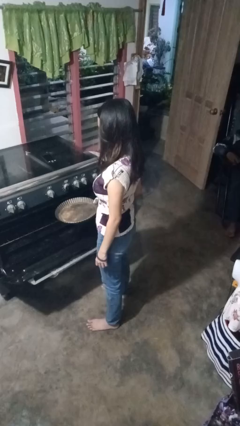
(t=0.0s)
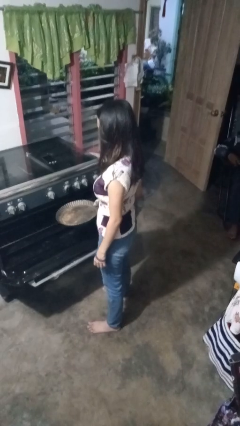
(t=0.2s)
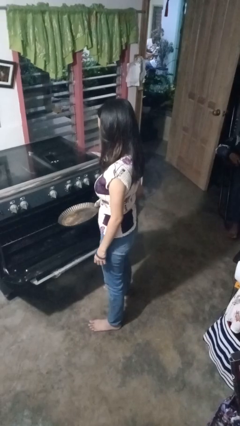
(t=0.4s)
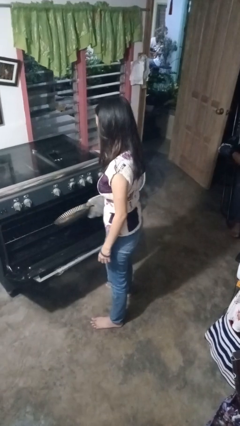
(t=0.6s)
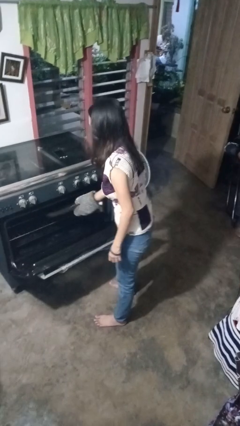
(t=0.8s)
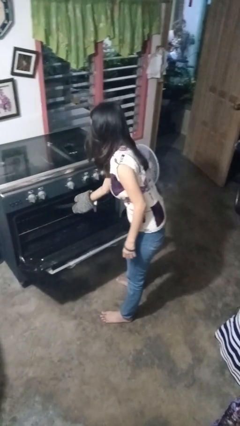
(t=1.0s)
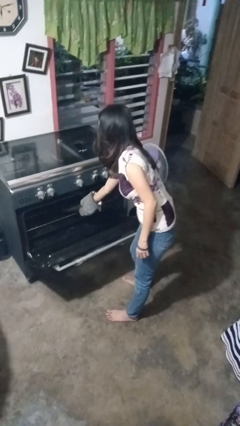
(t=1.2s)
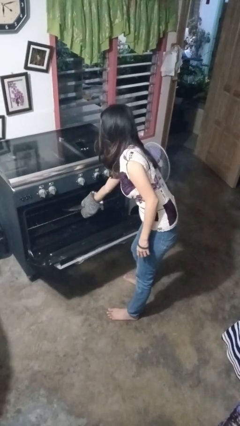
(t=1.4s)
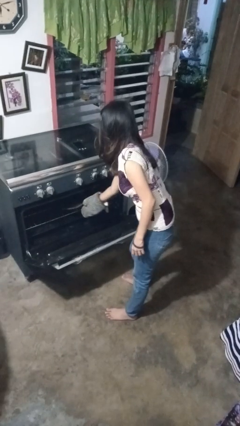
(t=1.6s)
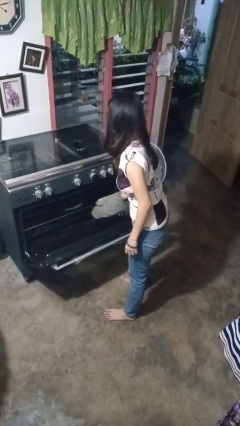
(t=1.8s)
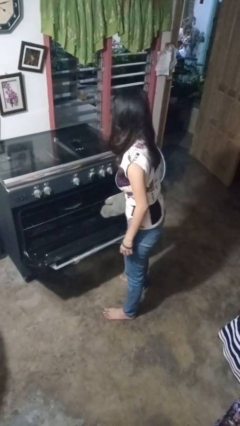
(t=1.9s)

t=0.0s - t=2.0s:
person puts object into oven

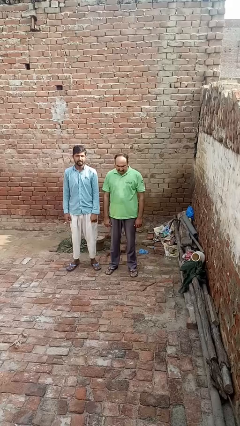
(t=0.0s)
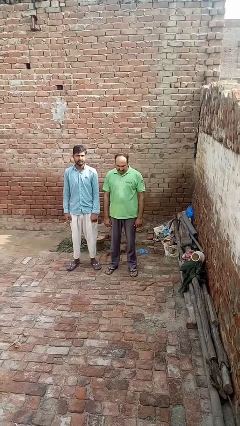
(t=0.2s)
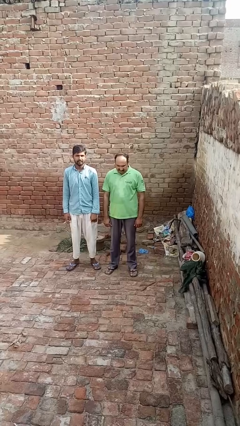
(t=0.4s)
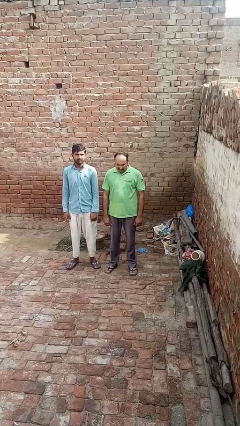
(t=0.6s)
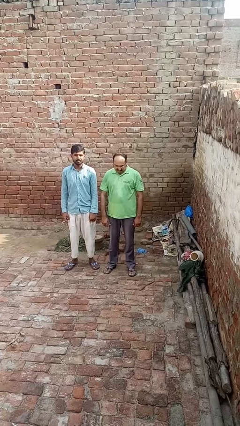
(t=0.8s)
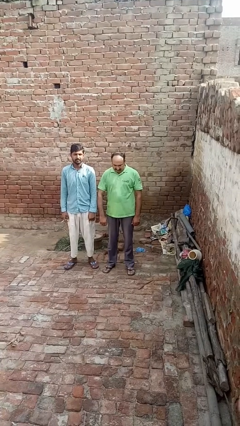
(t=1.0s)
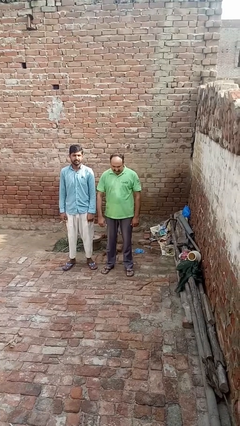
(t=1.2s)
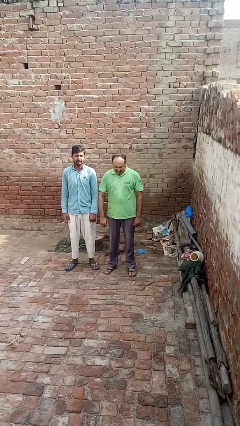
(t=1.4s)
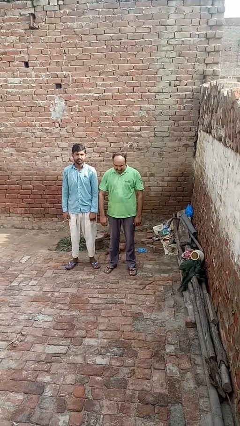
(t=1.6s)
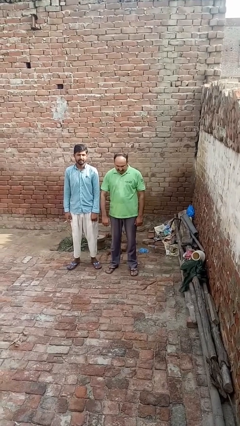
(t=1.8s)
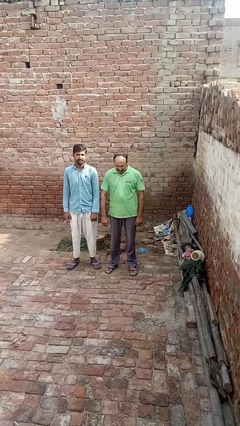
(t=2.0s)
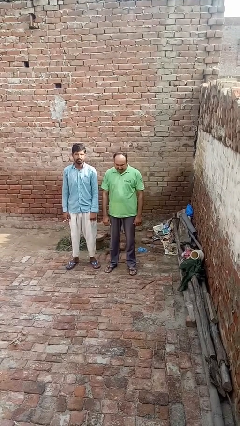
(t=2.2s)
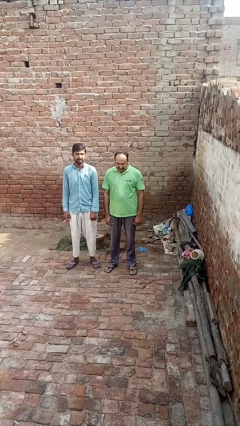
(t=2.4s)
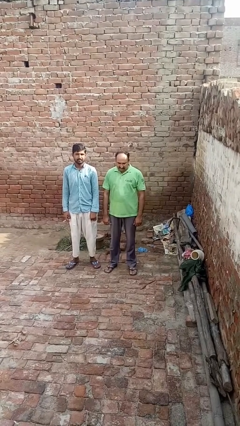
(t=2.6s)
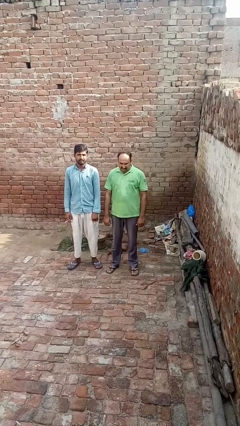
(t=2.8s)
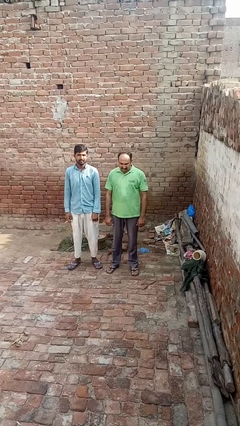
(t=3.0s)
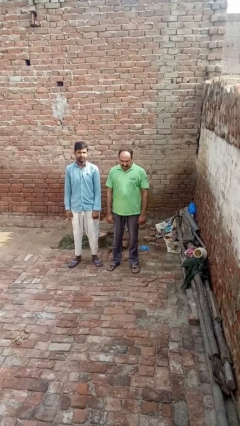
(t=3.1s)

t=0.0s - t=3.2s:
person nudges person with elbow

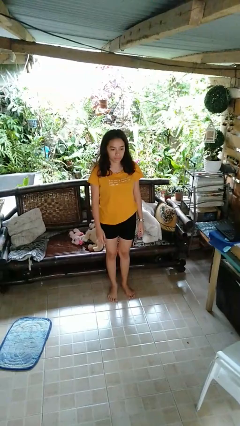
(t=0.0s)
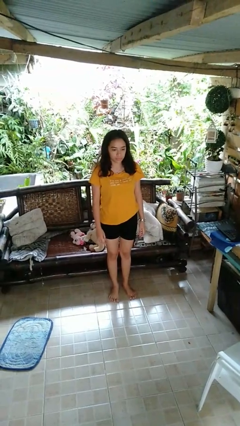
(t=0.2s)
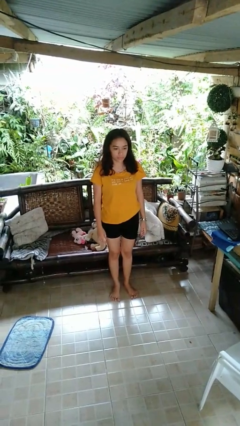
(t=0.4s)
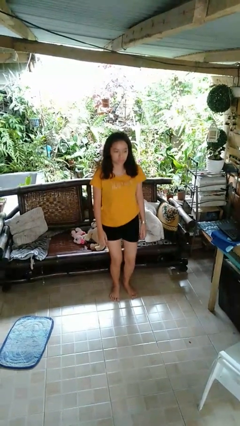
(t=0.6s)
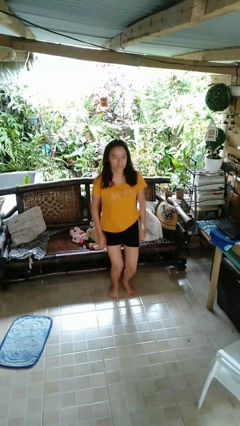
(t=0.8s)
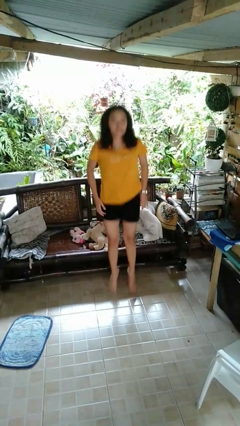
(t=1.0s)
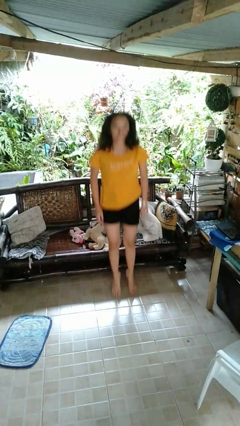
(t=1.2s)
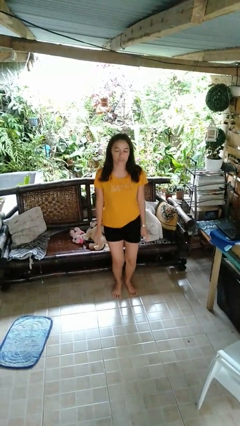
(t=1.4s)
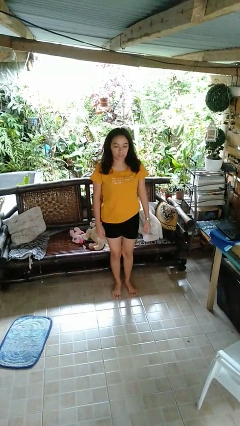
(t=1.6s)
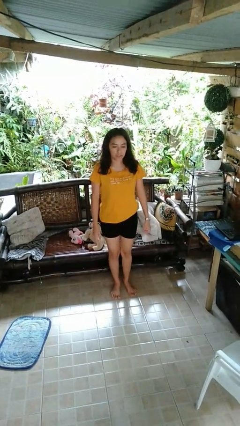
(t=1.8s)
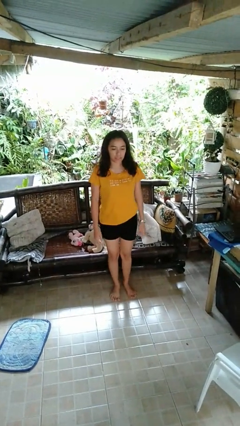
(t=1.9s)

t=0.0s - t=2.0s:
person jumps

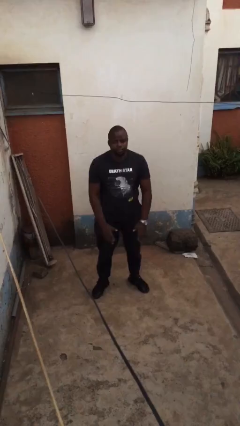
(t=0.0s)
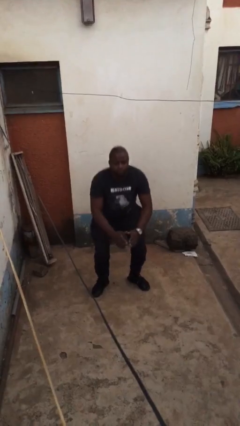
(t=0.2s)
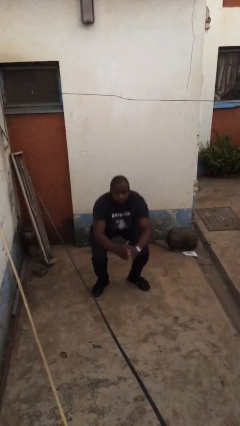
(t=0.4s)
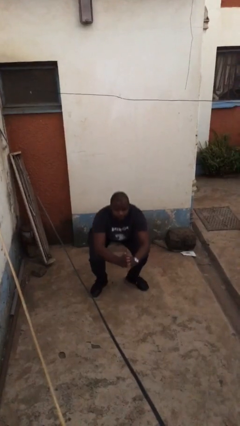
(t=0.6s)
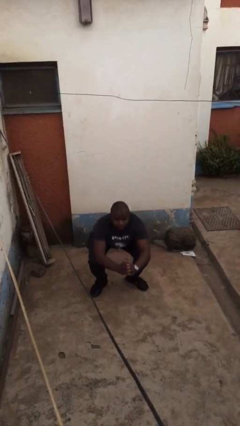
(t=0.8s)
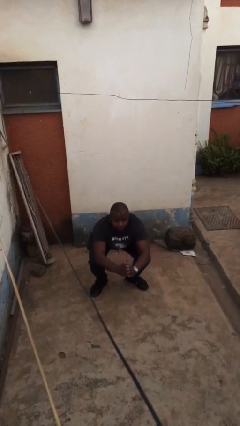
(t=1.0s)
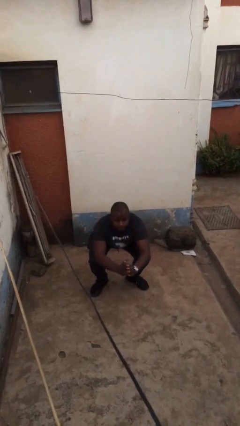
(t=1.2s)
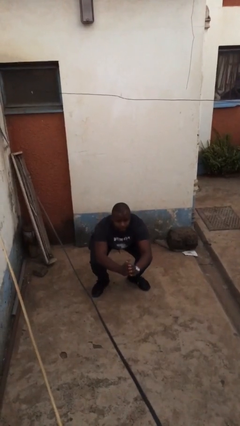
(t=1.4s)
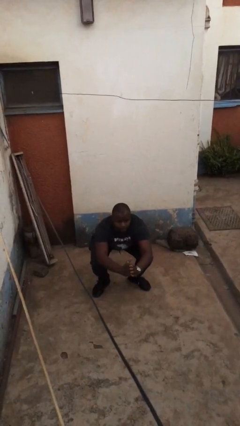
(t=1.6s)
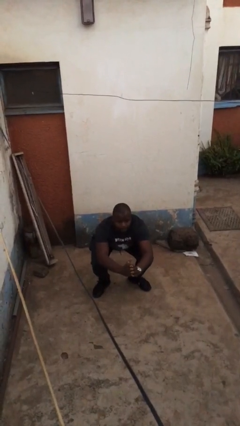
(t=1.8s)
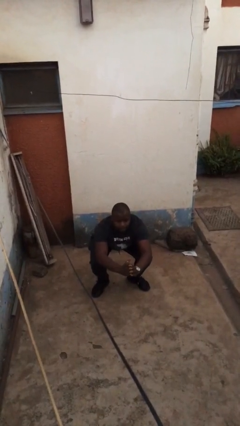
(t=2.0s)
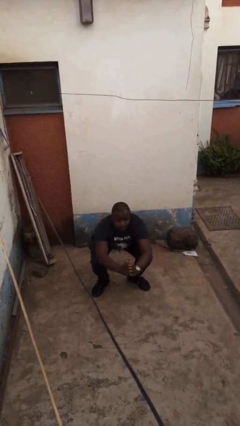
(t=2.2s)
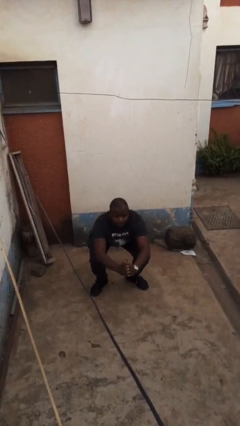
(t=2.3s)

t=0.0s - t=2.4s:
person squats

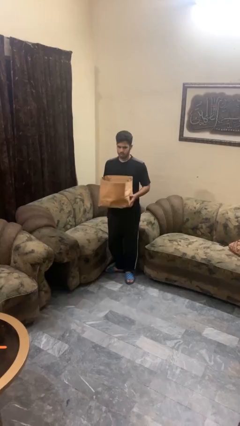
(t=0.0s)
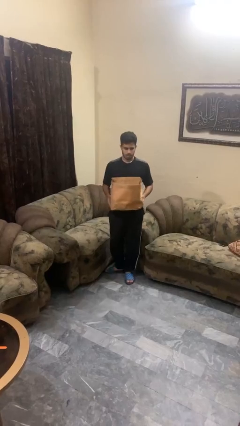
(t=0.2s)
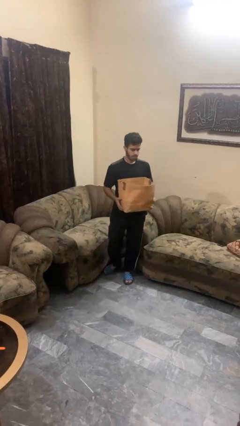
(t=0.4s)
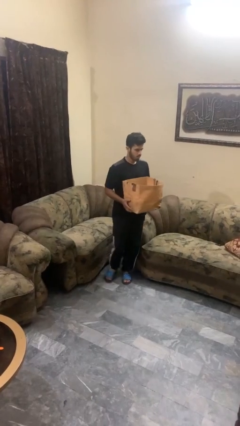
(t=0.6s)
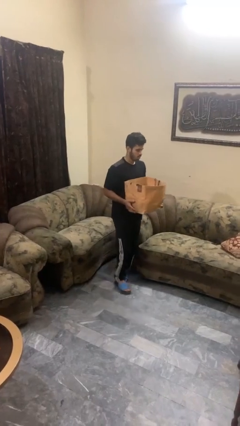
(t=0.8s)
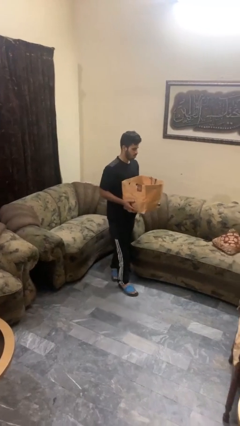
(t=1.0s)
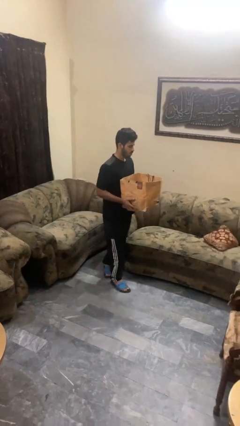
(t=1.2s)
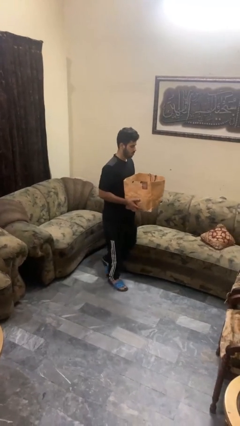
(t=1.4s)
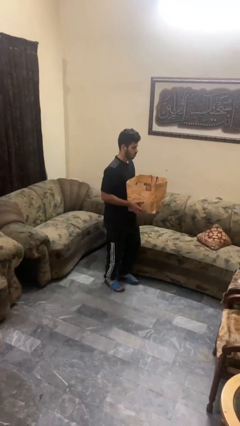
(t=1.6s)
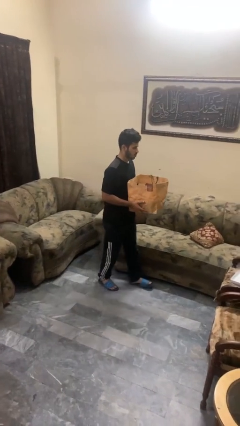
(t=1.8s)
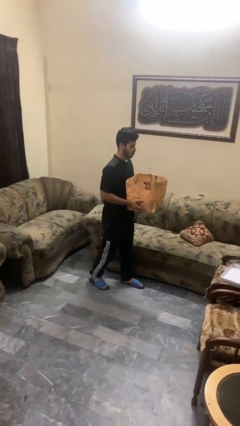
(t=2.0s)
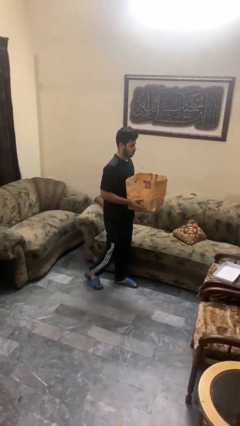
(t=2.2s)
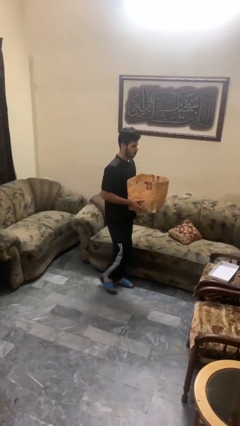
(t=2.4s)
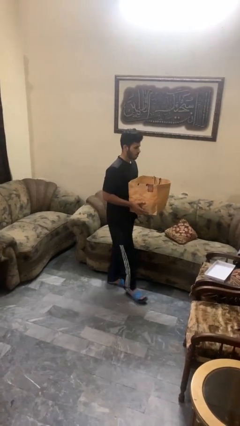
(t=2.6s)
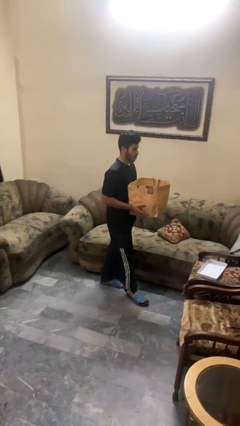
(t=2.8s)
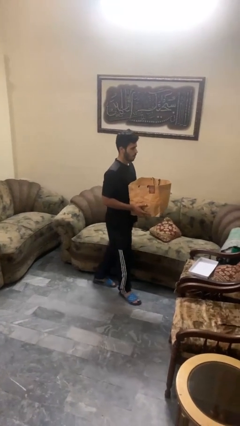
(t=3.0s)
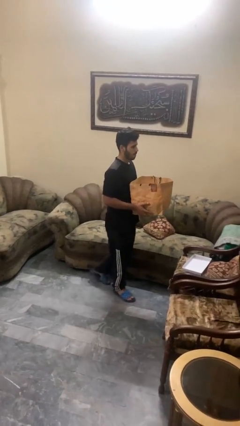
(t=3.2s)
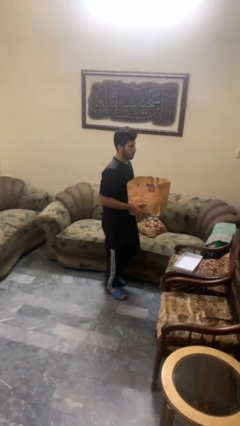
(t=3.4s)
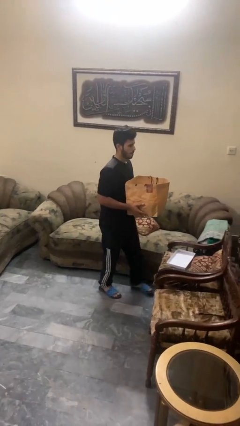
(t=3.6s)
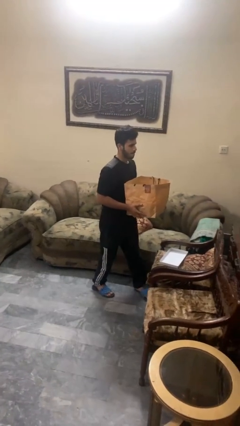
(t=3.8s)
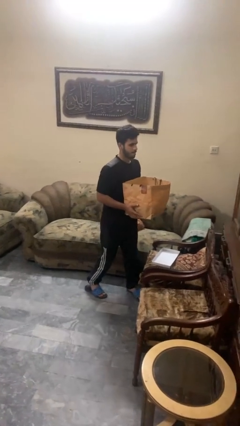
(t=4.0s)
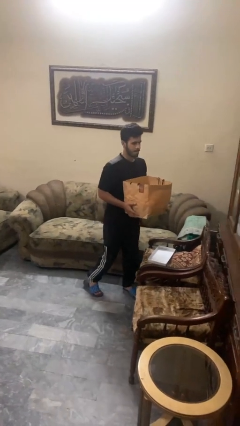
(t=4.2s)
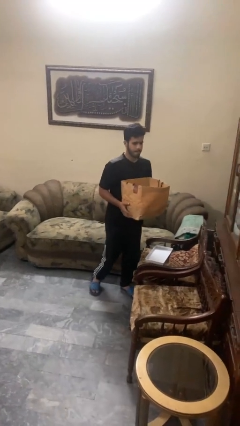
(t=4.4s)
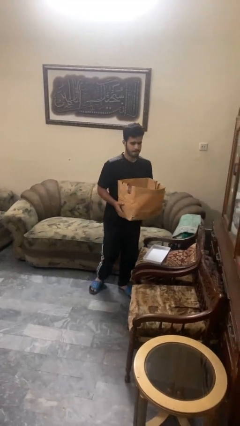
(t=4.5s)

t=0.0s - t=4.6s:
person carries groceries

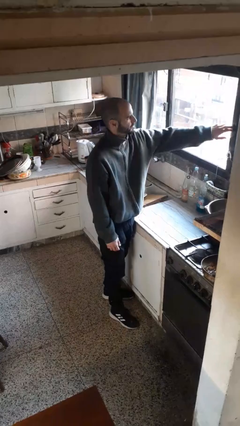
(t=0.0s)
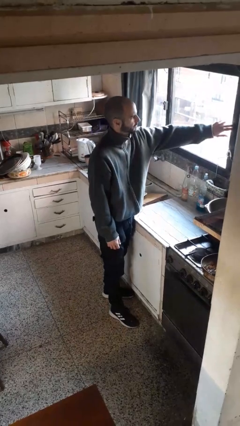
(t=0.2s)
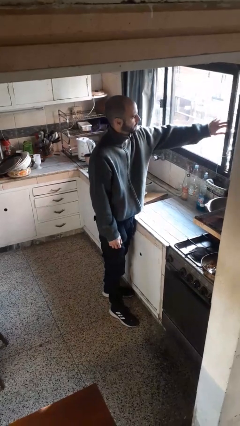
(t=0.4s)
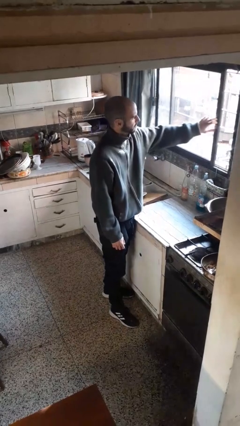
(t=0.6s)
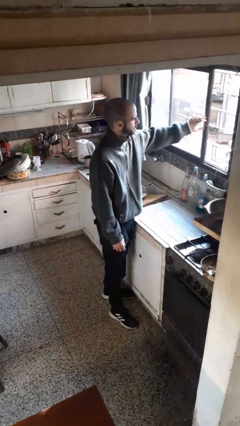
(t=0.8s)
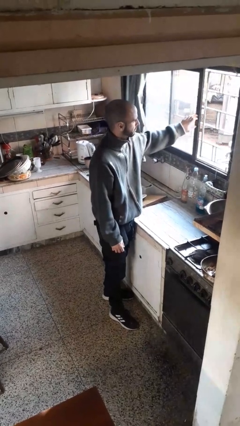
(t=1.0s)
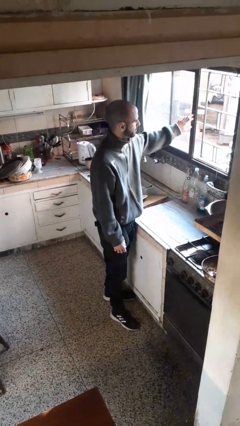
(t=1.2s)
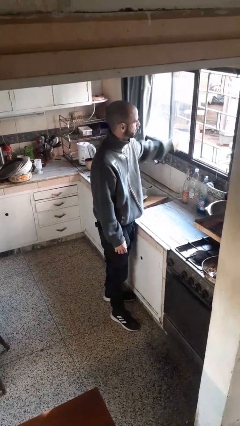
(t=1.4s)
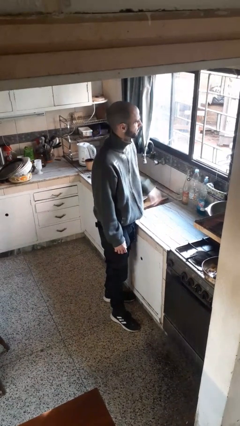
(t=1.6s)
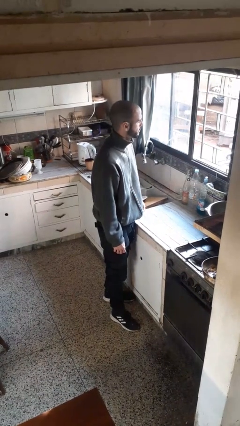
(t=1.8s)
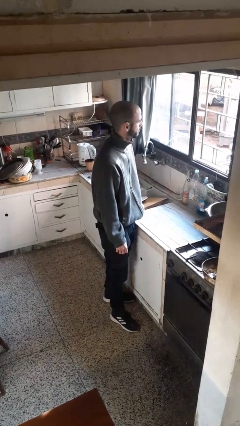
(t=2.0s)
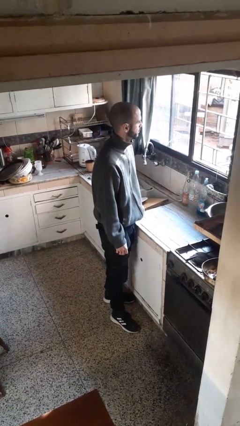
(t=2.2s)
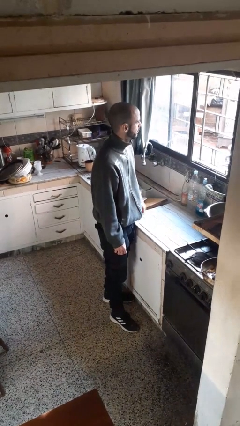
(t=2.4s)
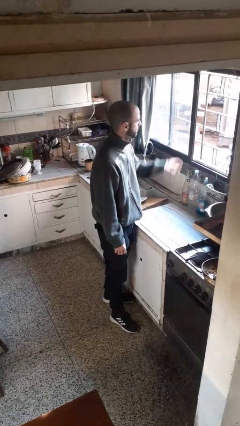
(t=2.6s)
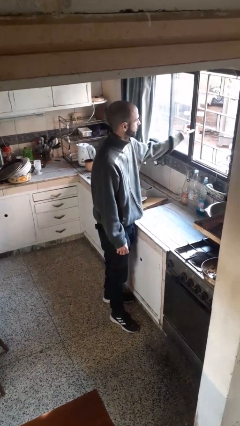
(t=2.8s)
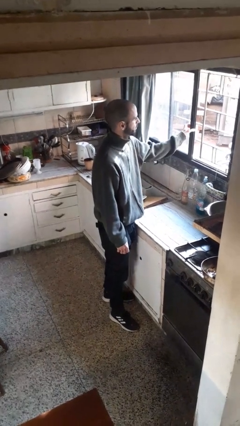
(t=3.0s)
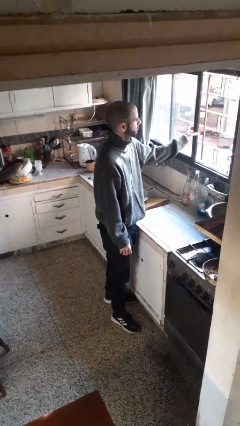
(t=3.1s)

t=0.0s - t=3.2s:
person opens home window
